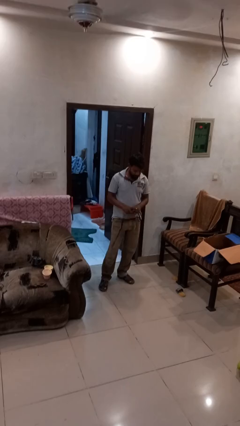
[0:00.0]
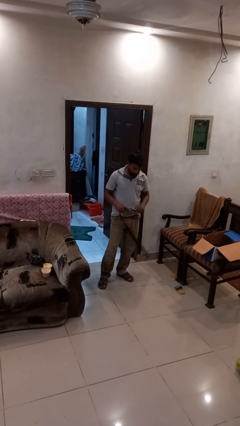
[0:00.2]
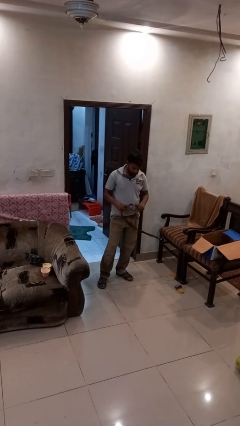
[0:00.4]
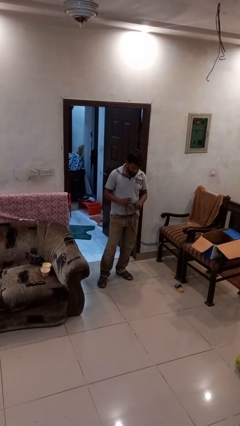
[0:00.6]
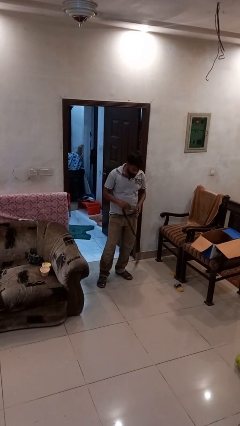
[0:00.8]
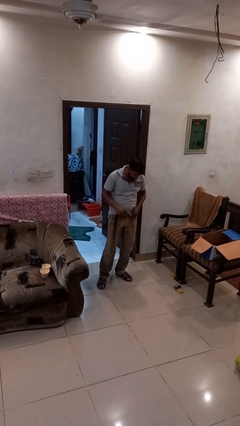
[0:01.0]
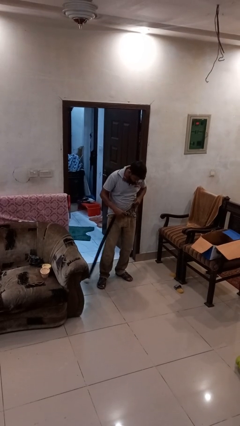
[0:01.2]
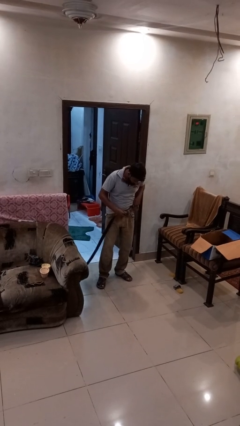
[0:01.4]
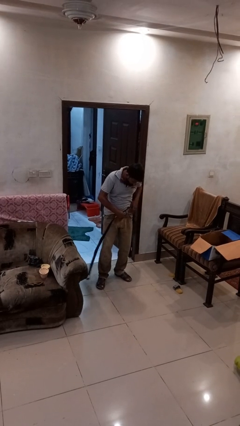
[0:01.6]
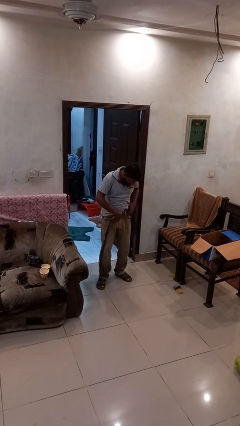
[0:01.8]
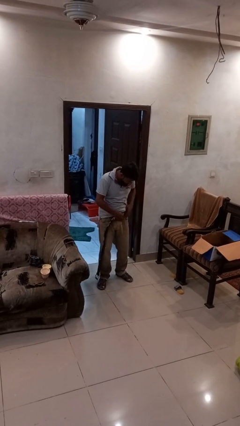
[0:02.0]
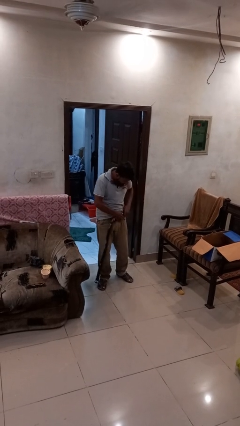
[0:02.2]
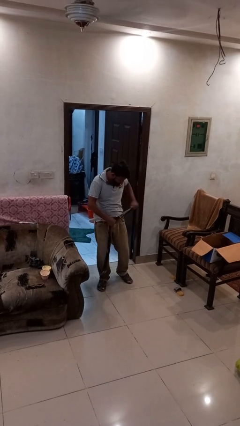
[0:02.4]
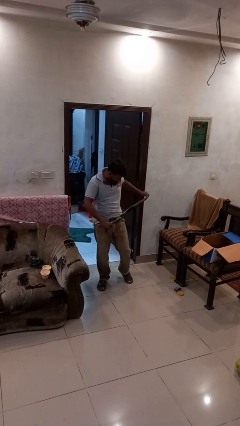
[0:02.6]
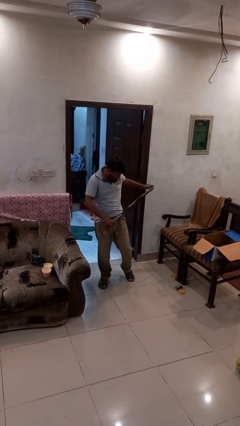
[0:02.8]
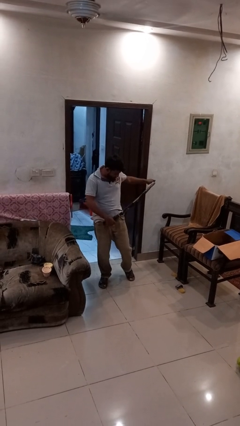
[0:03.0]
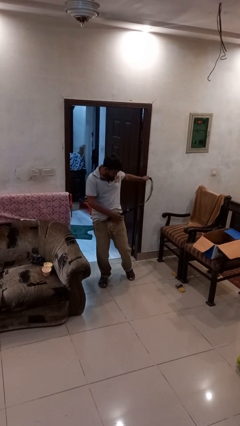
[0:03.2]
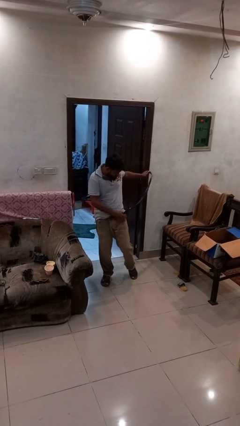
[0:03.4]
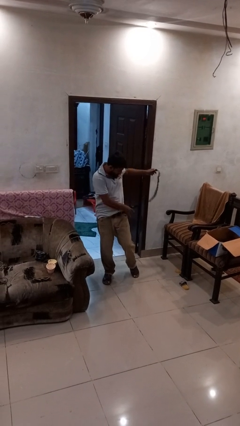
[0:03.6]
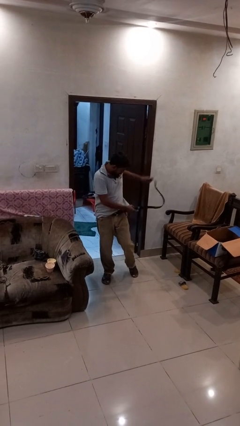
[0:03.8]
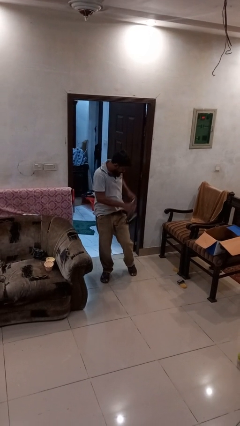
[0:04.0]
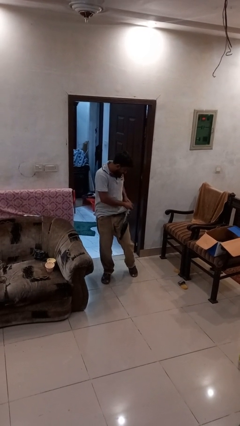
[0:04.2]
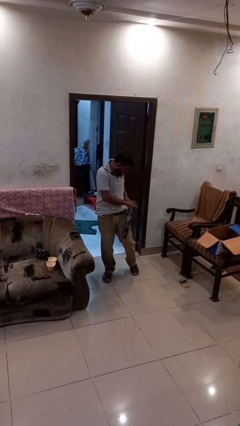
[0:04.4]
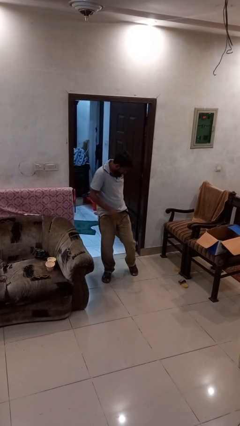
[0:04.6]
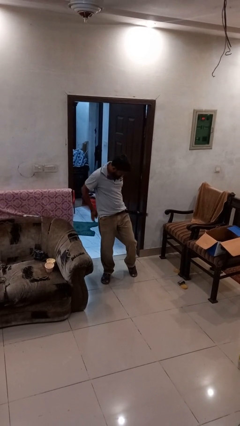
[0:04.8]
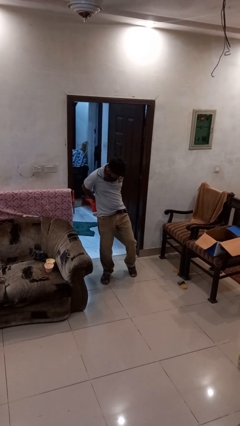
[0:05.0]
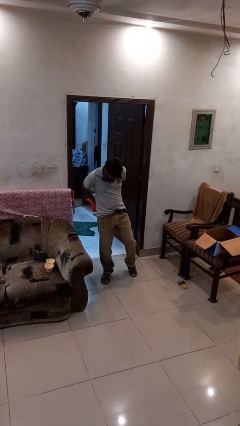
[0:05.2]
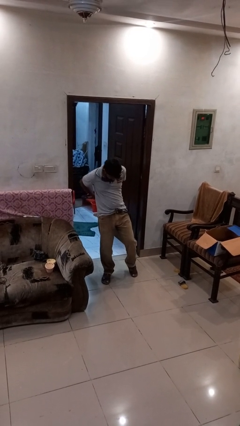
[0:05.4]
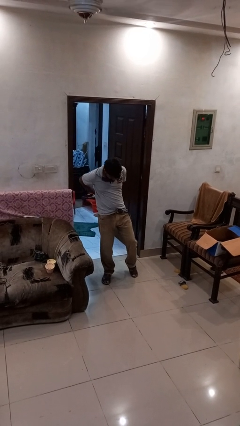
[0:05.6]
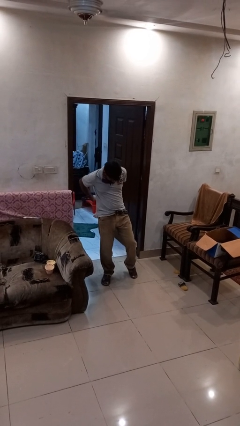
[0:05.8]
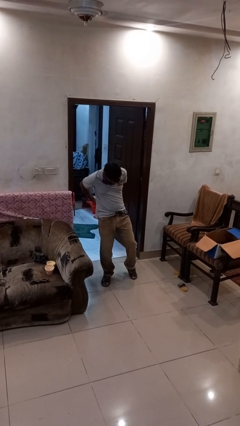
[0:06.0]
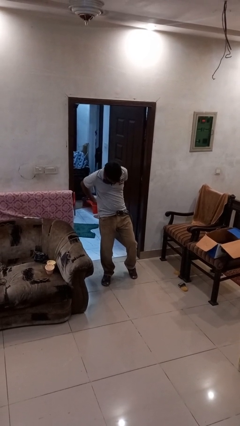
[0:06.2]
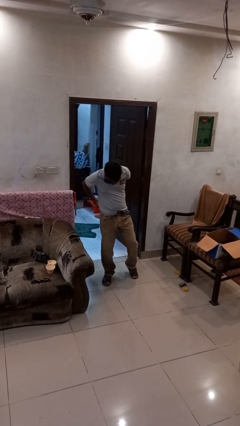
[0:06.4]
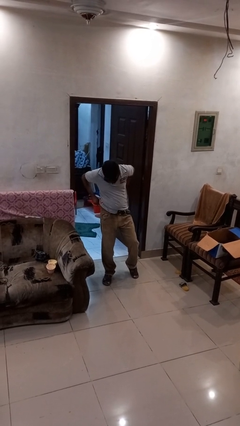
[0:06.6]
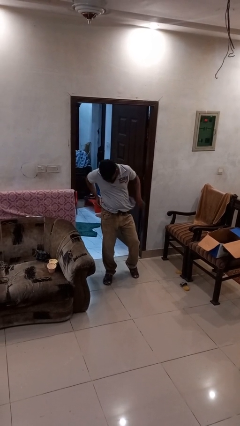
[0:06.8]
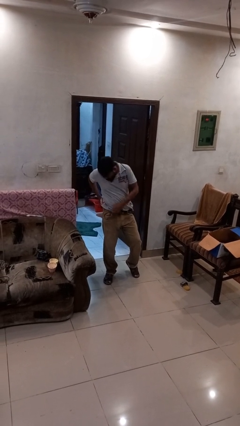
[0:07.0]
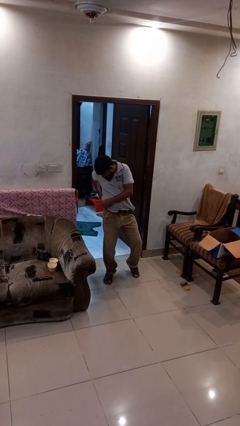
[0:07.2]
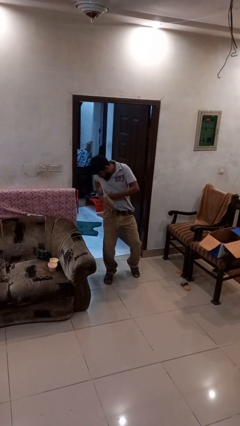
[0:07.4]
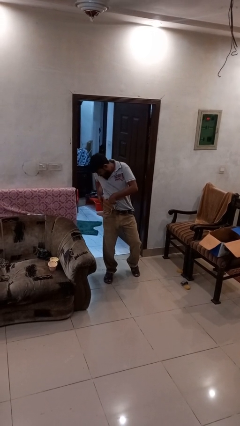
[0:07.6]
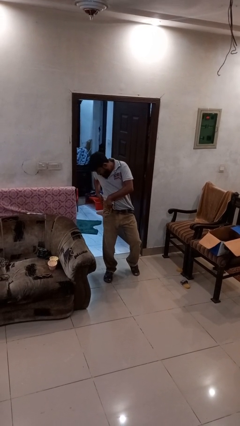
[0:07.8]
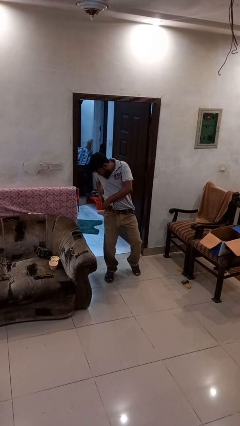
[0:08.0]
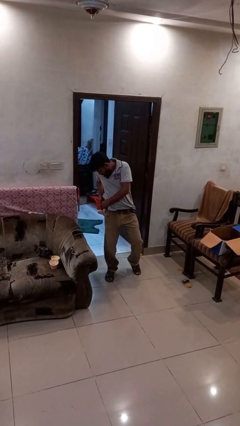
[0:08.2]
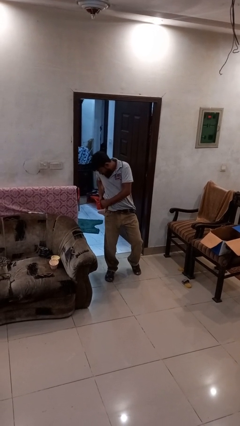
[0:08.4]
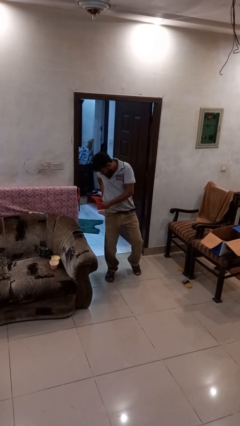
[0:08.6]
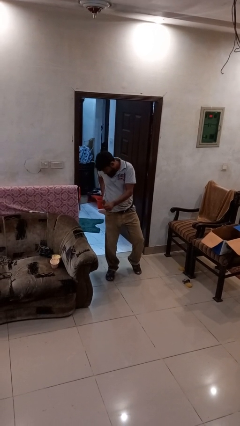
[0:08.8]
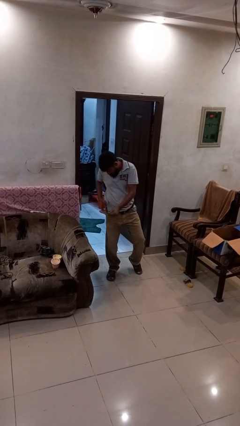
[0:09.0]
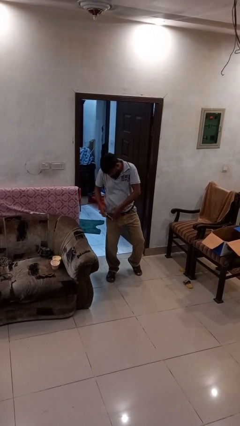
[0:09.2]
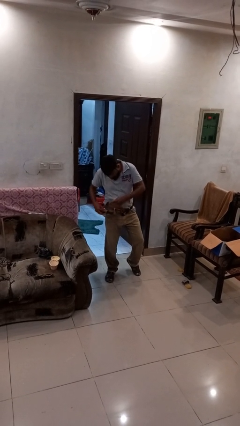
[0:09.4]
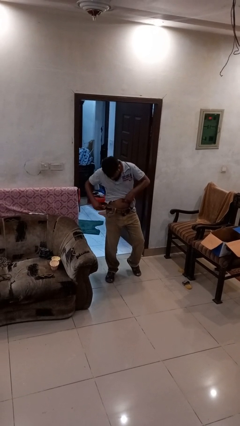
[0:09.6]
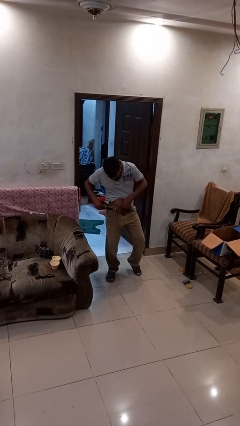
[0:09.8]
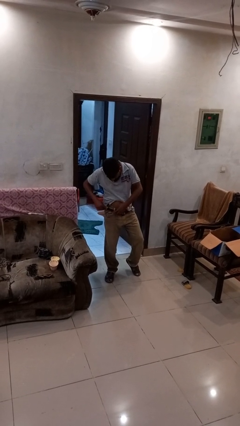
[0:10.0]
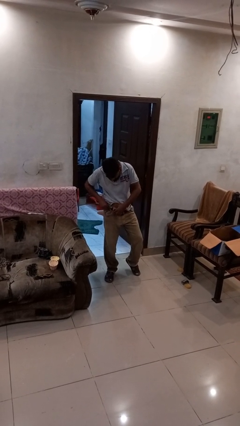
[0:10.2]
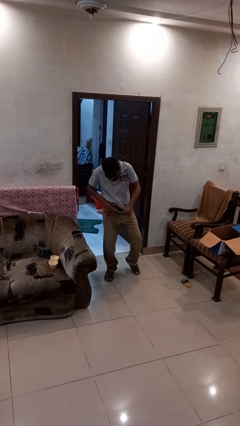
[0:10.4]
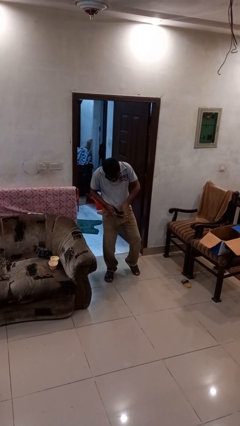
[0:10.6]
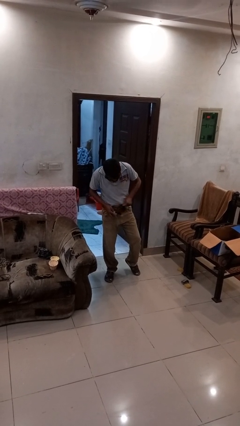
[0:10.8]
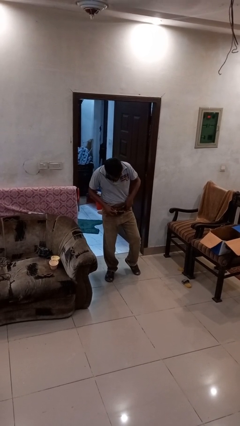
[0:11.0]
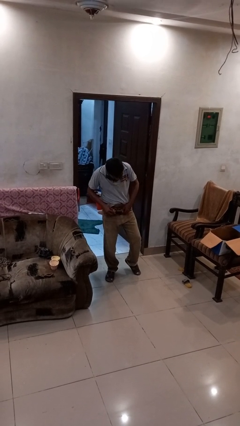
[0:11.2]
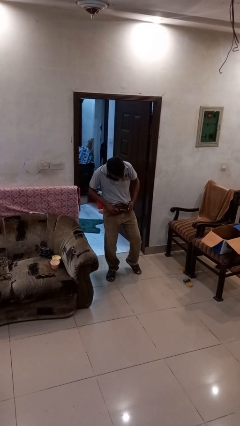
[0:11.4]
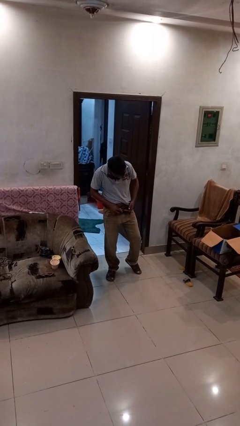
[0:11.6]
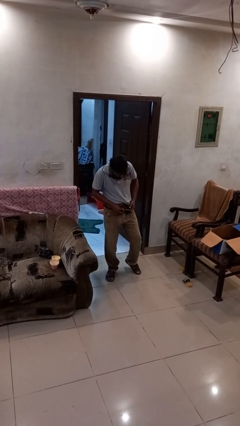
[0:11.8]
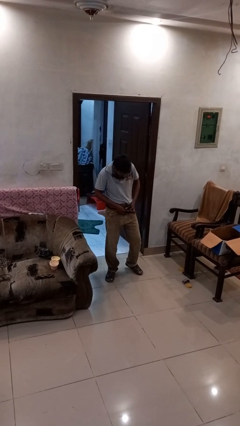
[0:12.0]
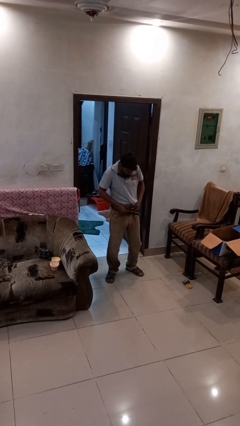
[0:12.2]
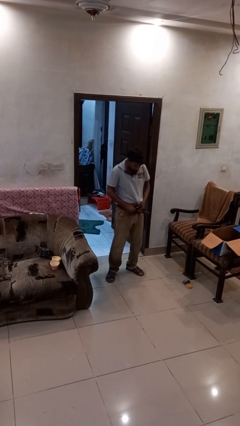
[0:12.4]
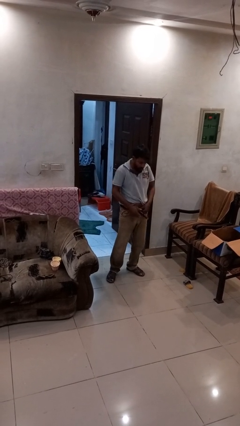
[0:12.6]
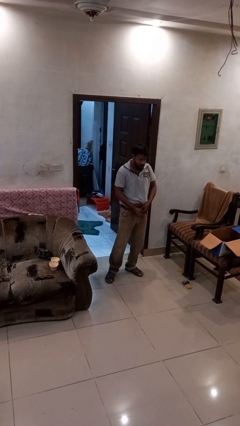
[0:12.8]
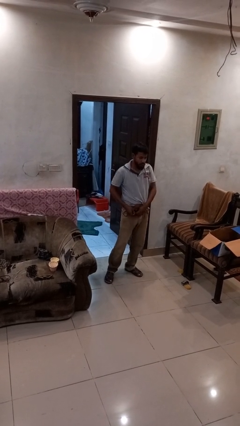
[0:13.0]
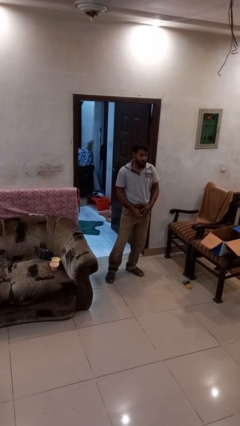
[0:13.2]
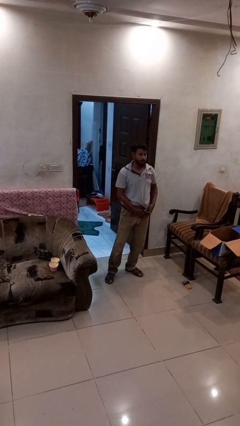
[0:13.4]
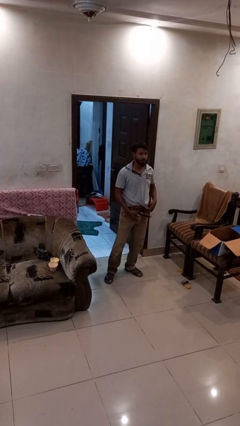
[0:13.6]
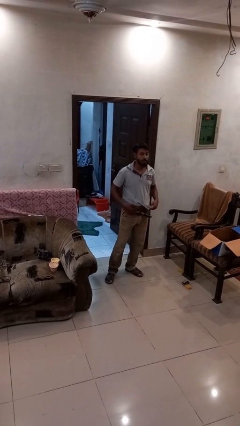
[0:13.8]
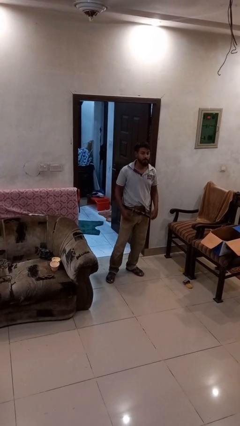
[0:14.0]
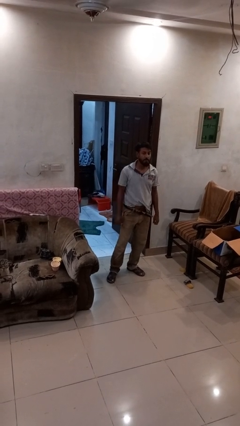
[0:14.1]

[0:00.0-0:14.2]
person puts on belt

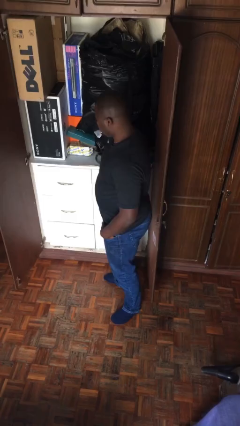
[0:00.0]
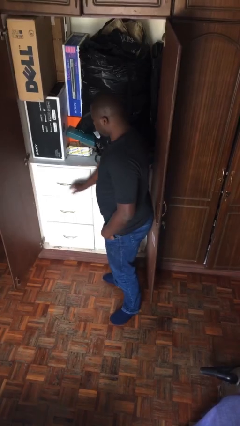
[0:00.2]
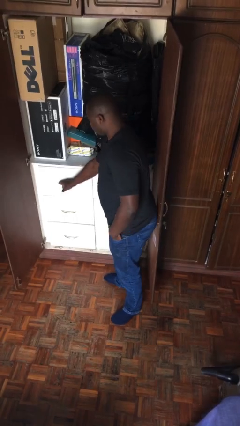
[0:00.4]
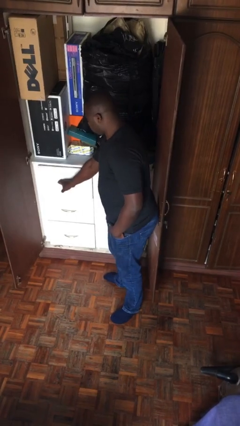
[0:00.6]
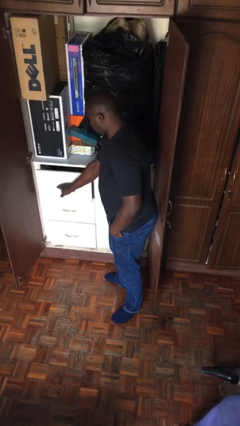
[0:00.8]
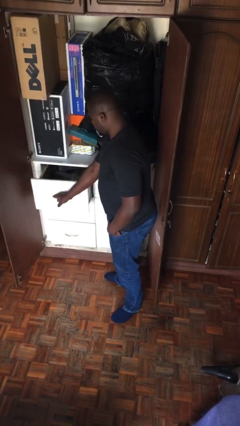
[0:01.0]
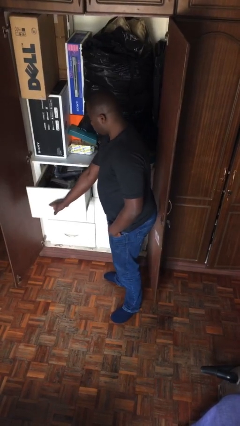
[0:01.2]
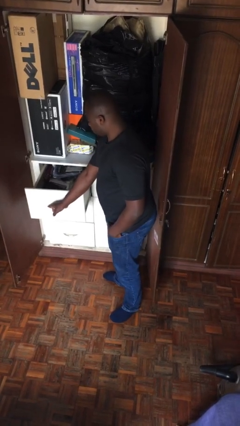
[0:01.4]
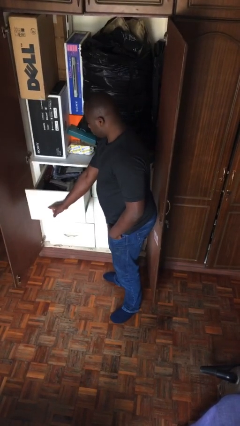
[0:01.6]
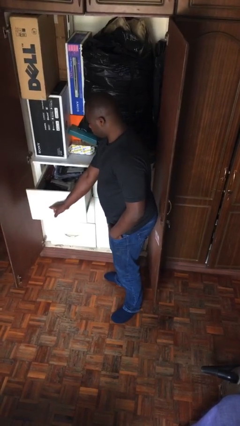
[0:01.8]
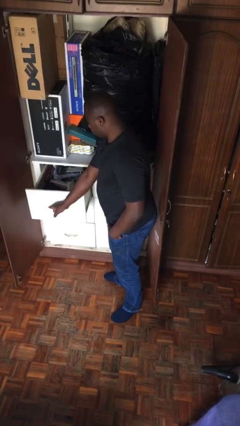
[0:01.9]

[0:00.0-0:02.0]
person opens dresser drawer

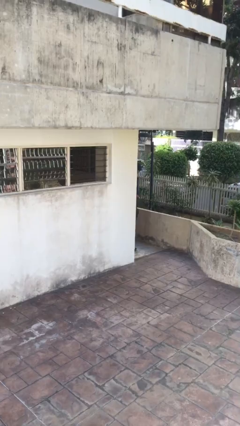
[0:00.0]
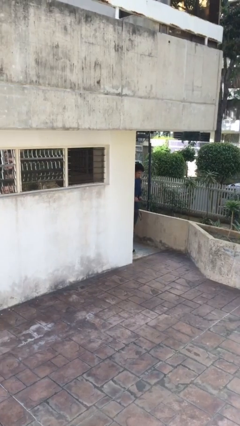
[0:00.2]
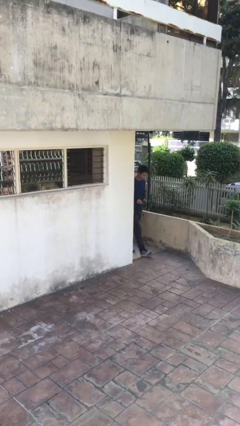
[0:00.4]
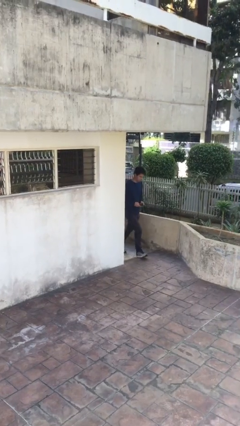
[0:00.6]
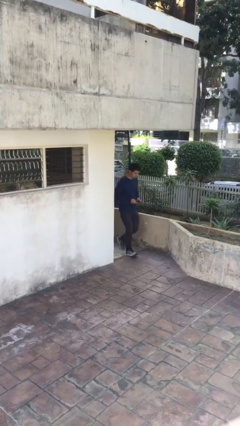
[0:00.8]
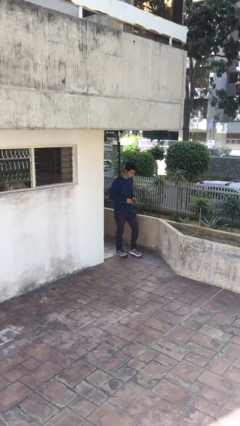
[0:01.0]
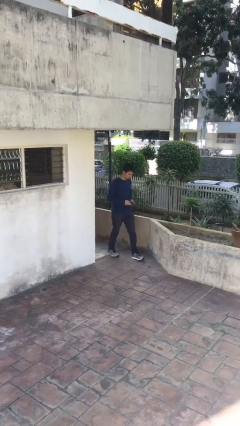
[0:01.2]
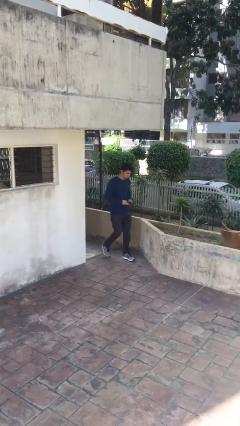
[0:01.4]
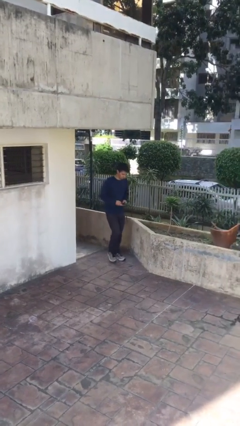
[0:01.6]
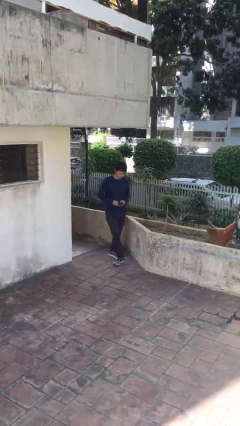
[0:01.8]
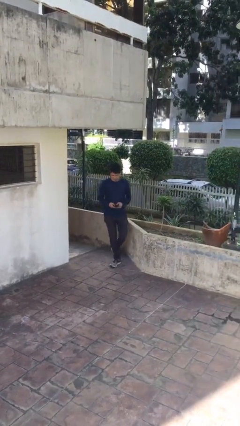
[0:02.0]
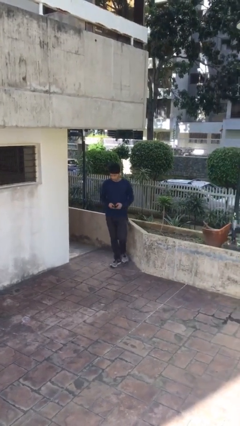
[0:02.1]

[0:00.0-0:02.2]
person enters scene through structure
